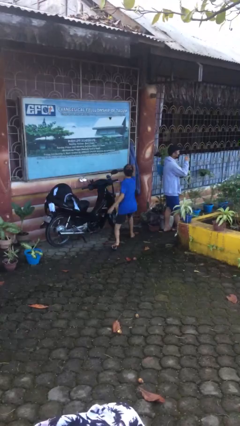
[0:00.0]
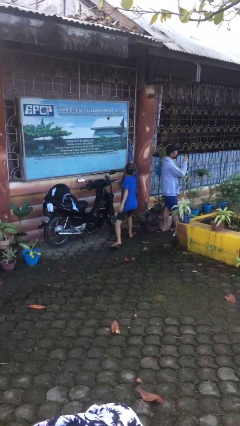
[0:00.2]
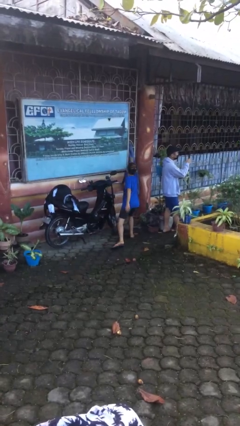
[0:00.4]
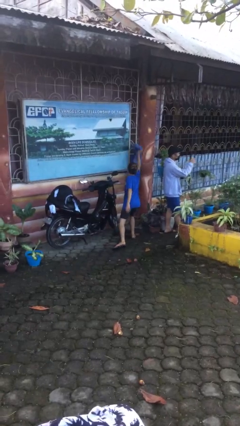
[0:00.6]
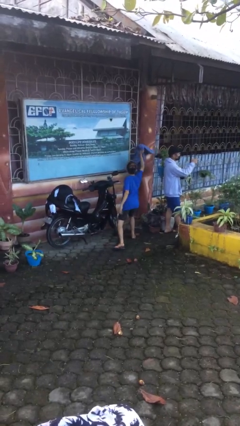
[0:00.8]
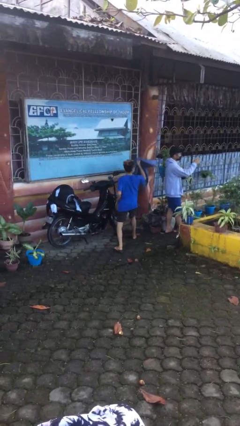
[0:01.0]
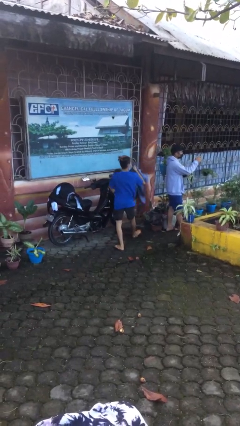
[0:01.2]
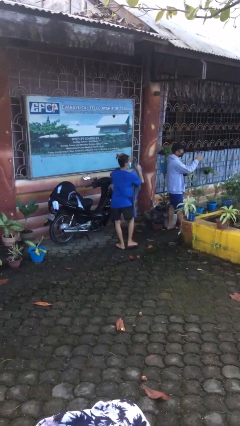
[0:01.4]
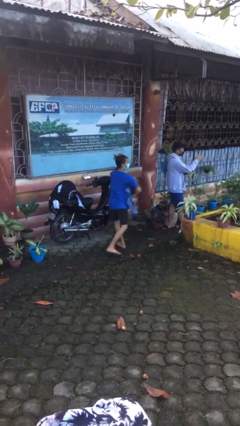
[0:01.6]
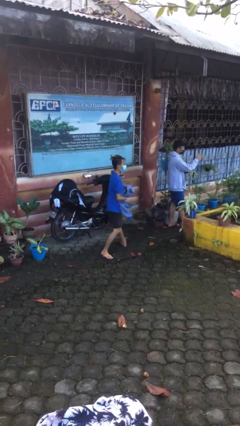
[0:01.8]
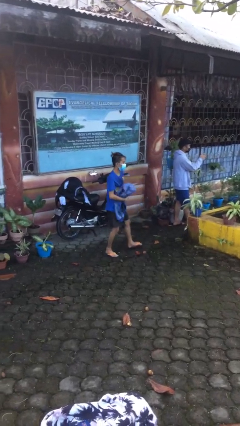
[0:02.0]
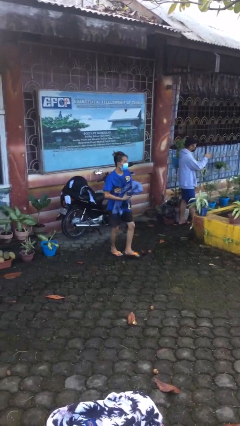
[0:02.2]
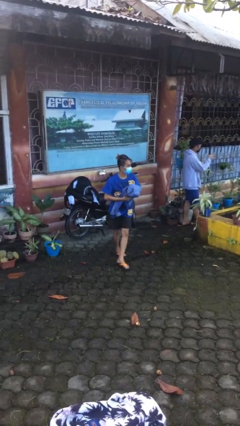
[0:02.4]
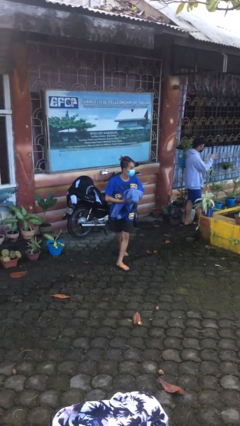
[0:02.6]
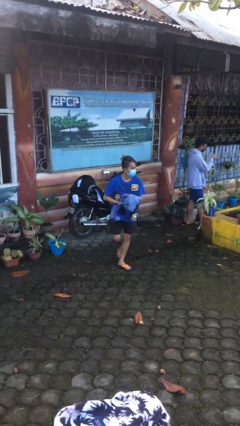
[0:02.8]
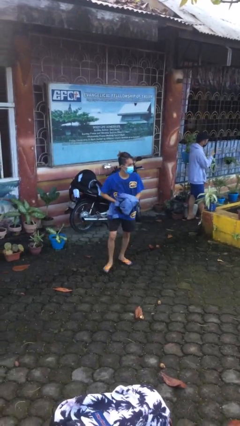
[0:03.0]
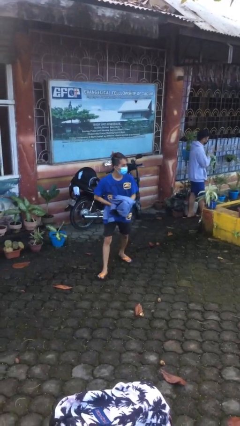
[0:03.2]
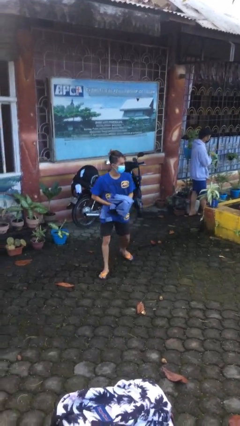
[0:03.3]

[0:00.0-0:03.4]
person steals object from person

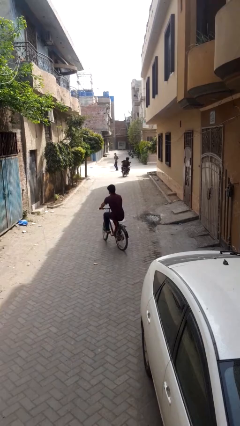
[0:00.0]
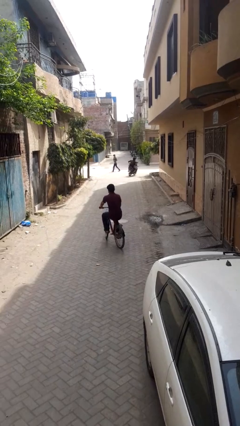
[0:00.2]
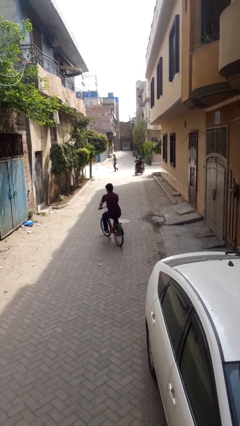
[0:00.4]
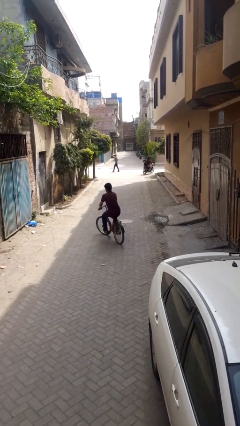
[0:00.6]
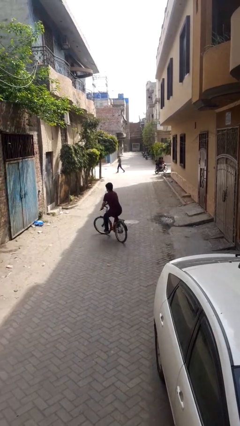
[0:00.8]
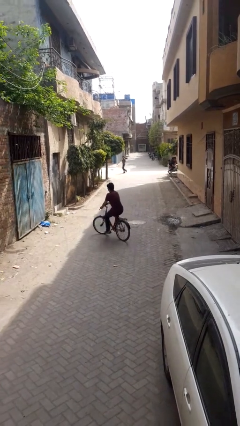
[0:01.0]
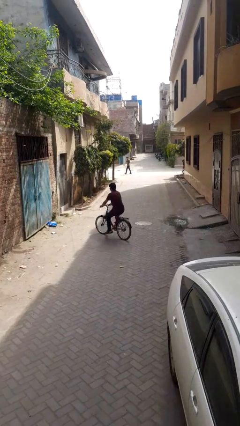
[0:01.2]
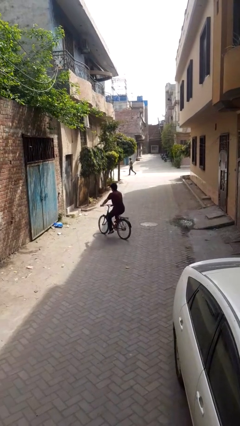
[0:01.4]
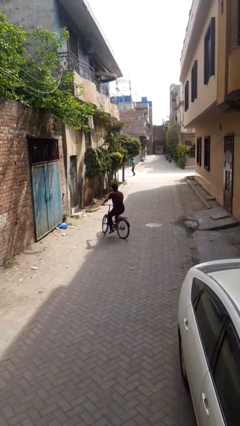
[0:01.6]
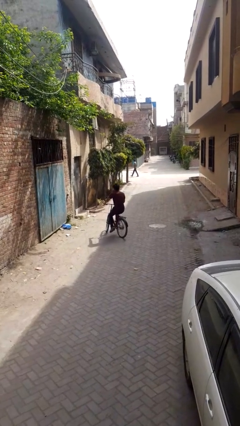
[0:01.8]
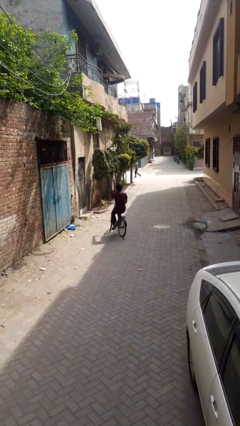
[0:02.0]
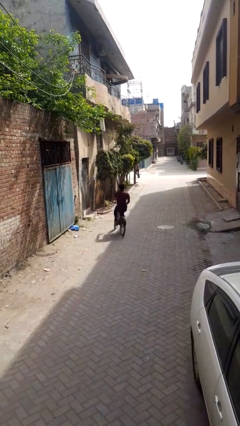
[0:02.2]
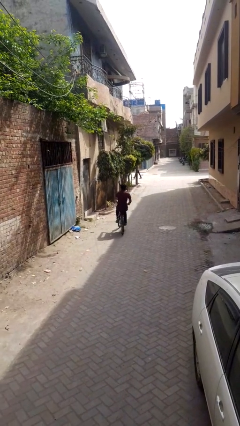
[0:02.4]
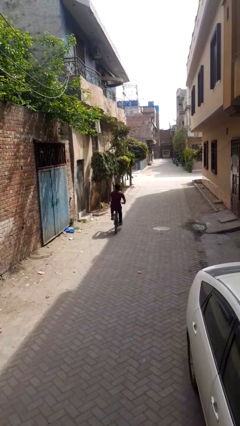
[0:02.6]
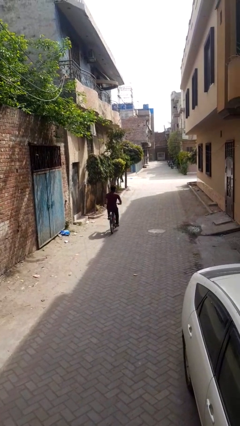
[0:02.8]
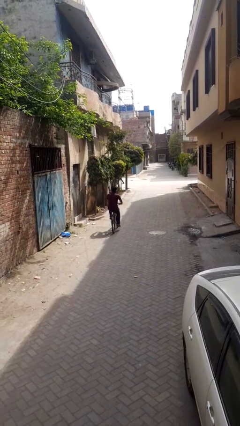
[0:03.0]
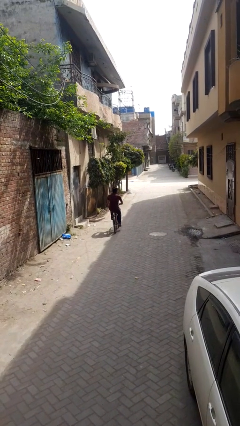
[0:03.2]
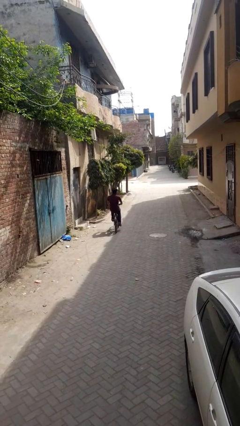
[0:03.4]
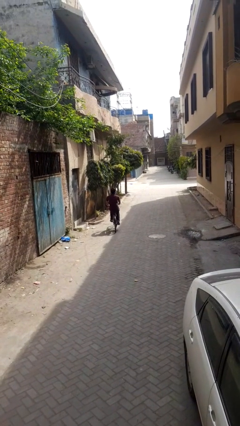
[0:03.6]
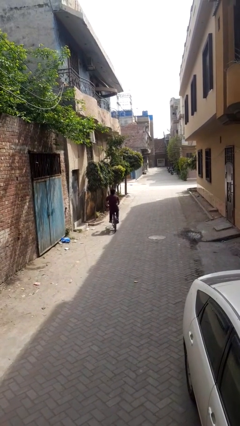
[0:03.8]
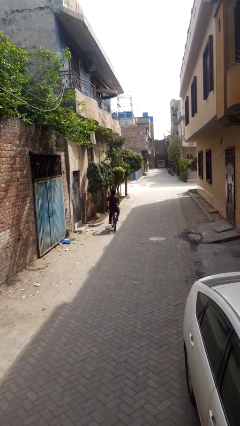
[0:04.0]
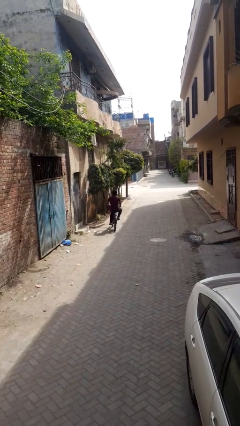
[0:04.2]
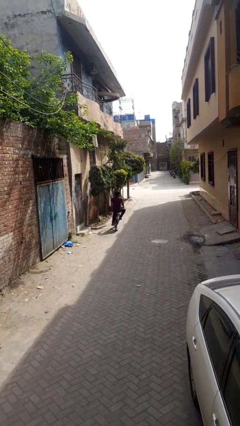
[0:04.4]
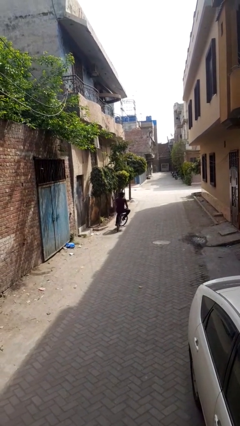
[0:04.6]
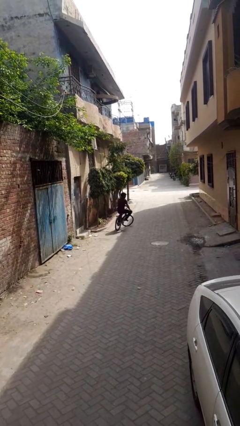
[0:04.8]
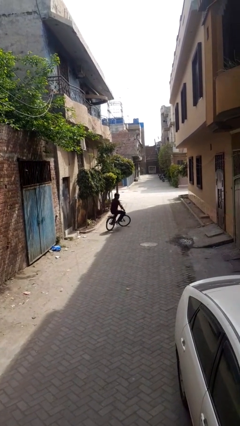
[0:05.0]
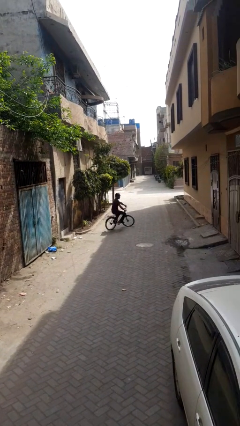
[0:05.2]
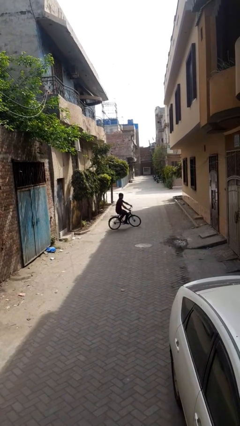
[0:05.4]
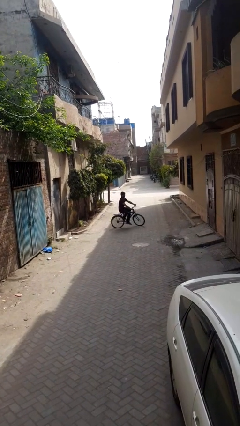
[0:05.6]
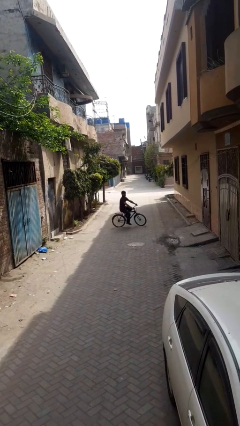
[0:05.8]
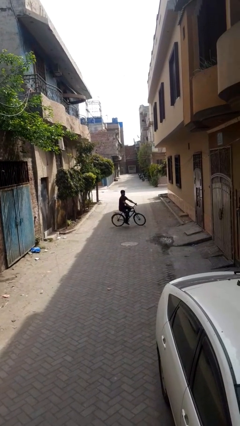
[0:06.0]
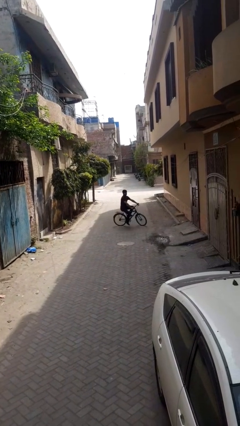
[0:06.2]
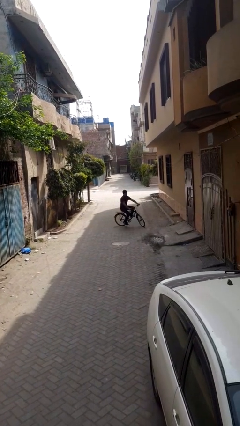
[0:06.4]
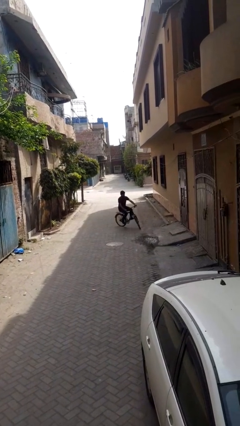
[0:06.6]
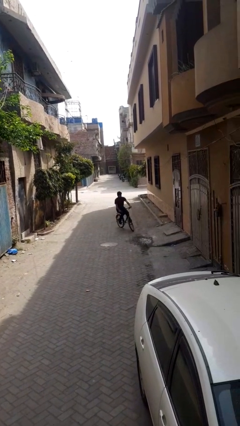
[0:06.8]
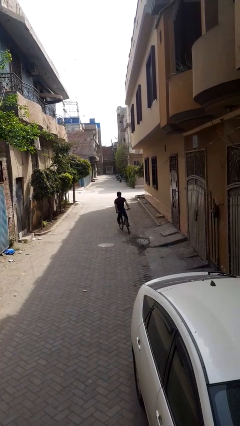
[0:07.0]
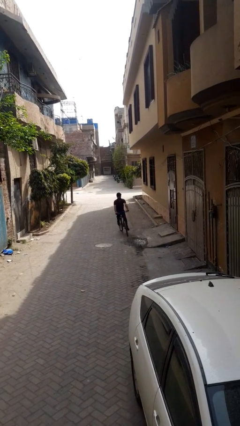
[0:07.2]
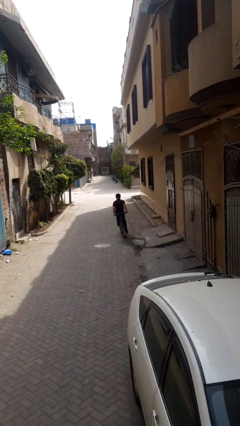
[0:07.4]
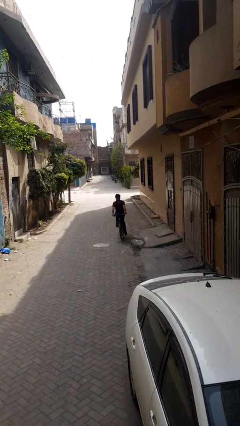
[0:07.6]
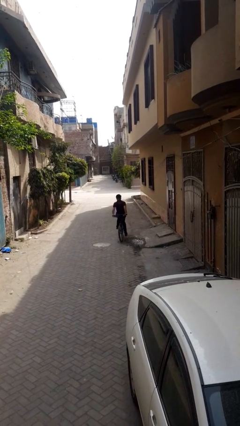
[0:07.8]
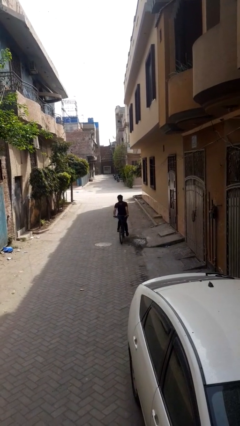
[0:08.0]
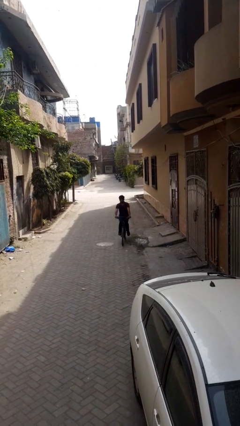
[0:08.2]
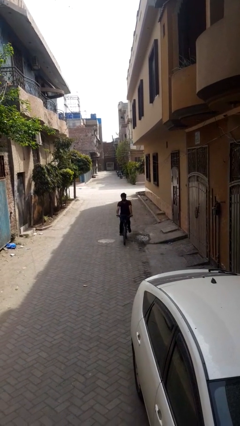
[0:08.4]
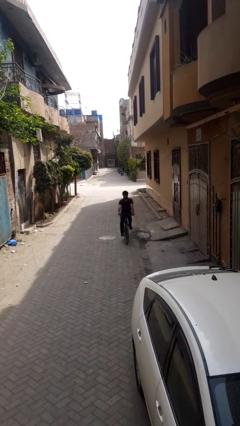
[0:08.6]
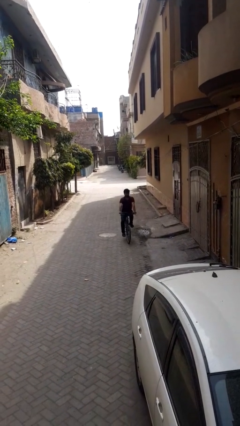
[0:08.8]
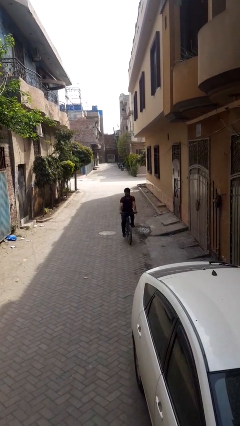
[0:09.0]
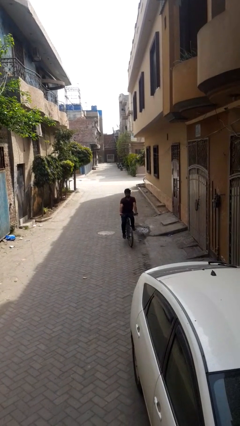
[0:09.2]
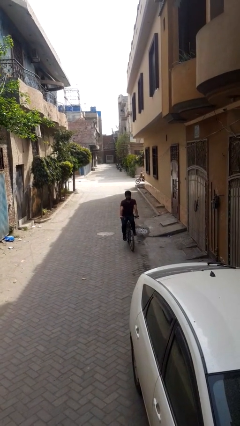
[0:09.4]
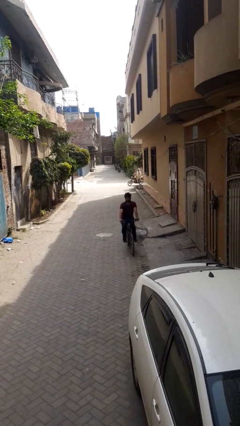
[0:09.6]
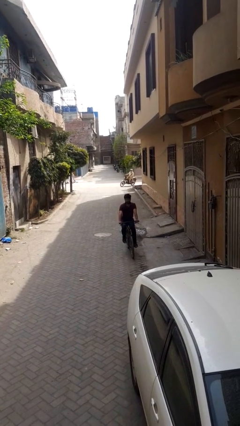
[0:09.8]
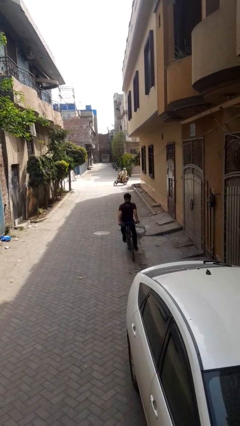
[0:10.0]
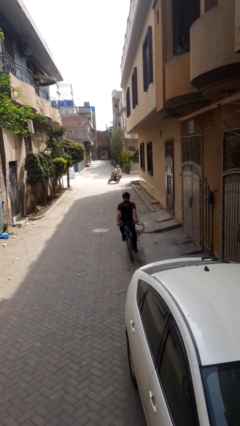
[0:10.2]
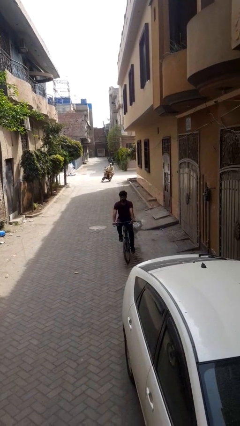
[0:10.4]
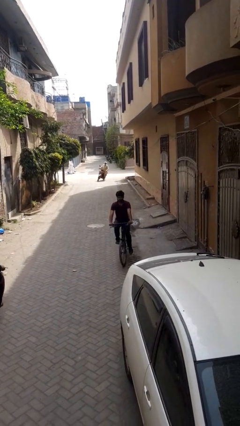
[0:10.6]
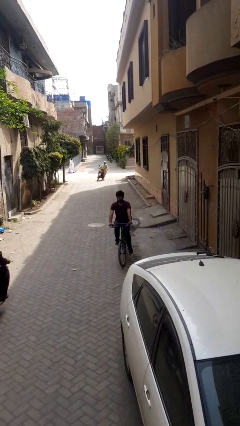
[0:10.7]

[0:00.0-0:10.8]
person rides bicycle

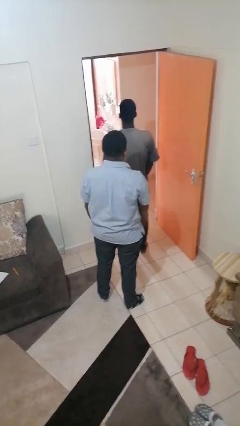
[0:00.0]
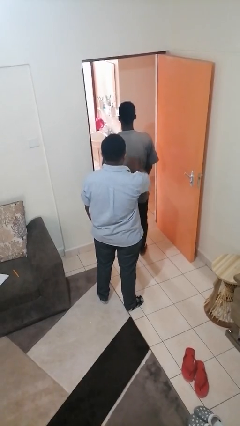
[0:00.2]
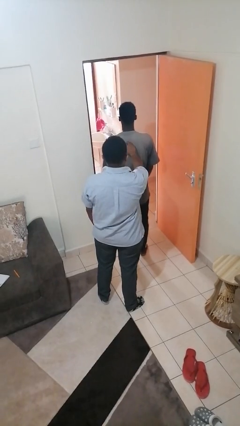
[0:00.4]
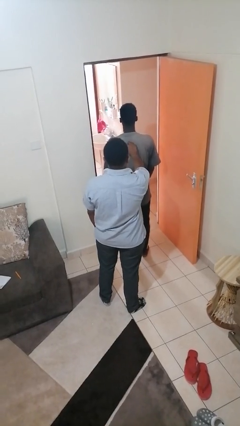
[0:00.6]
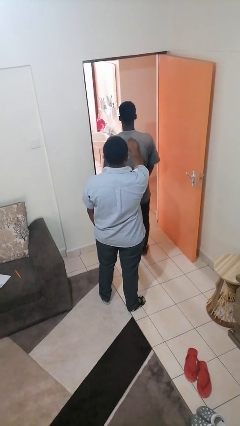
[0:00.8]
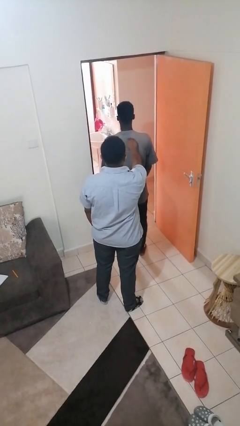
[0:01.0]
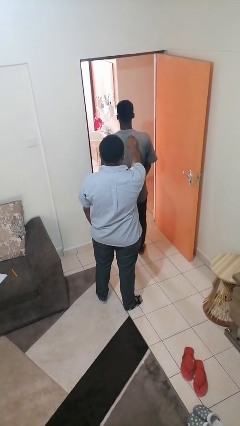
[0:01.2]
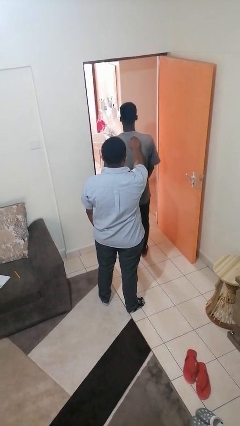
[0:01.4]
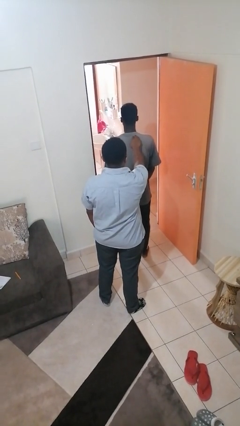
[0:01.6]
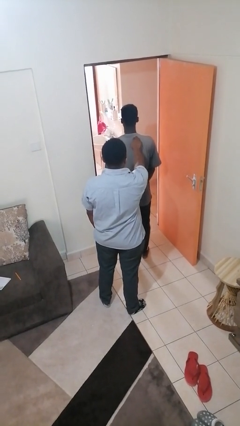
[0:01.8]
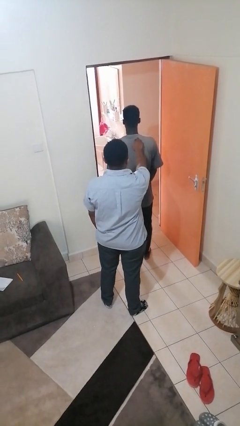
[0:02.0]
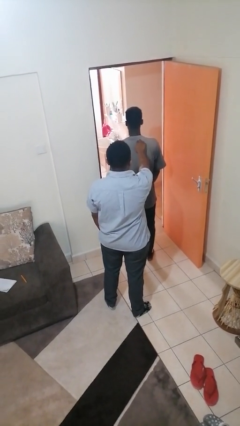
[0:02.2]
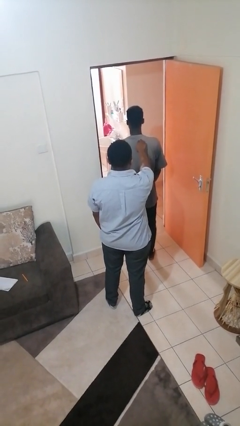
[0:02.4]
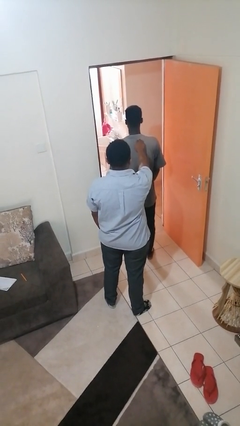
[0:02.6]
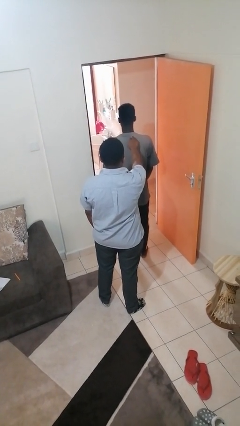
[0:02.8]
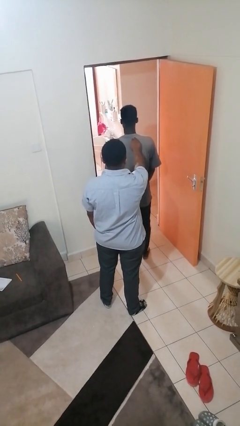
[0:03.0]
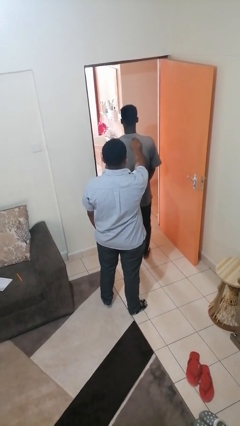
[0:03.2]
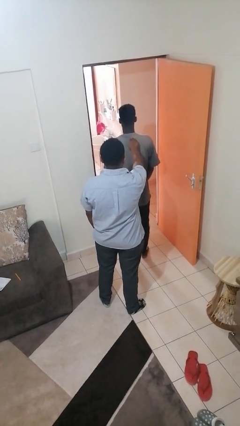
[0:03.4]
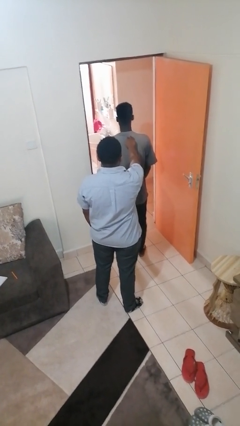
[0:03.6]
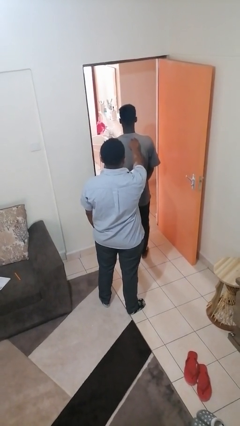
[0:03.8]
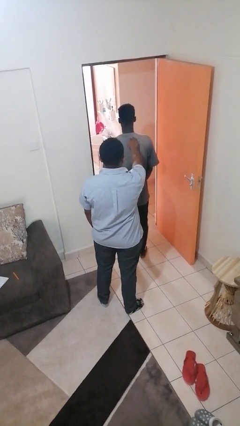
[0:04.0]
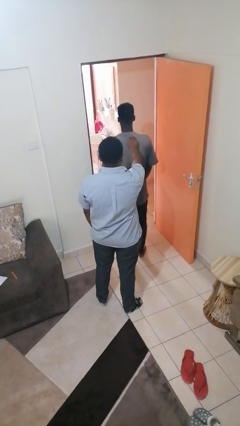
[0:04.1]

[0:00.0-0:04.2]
person touches back of person
